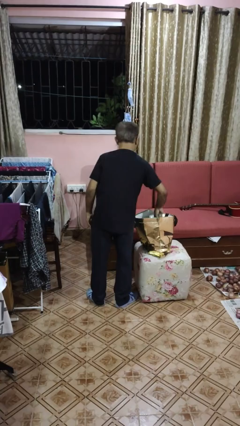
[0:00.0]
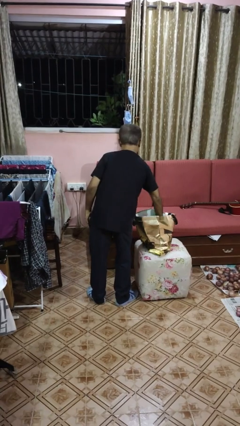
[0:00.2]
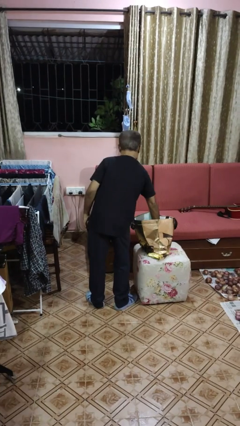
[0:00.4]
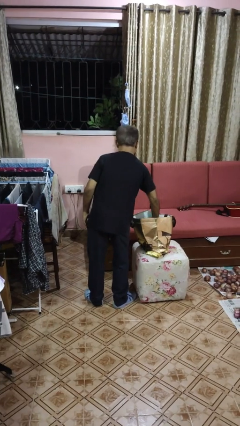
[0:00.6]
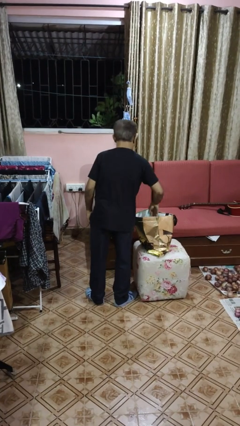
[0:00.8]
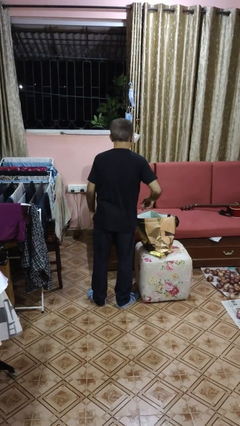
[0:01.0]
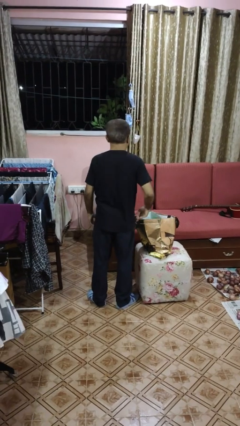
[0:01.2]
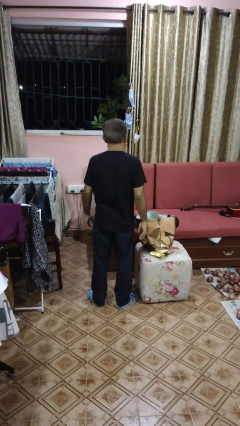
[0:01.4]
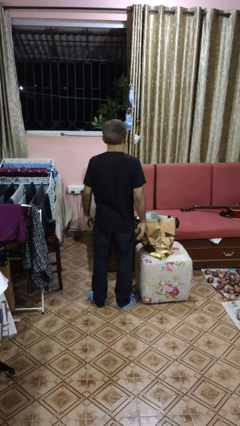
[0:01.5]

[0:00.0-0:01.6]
person puts object into bag

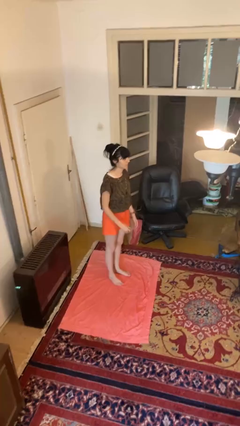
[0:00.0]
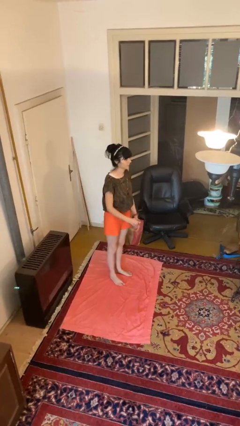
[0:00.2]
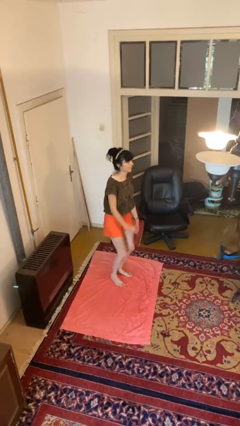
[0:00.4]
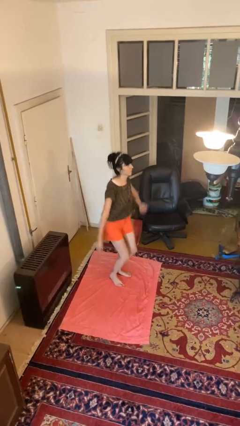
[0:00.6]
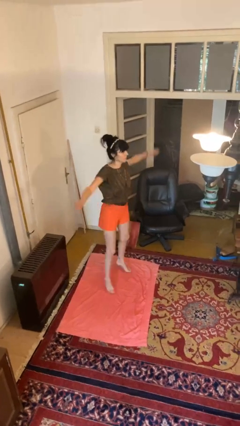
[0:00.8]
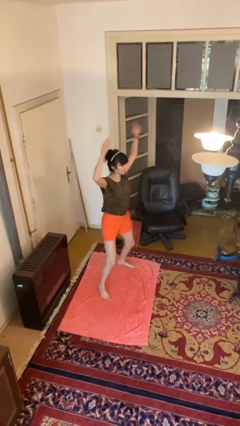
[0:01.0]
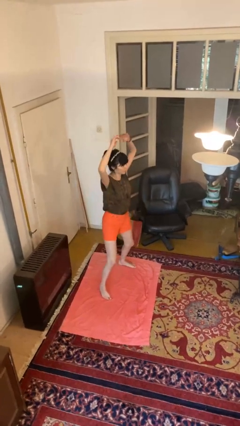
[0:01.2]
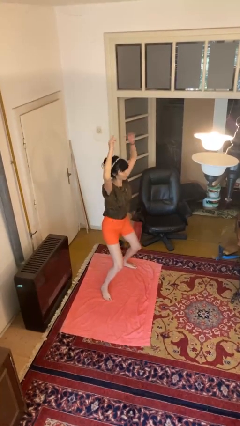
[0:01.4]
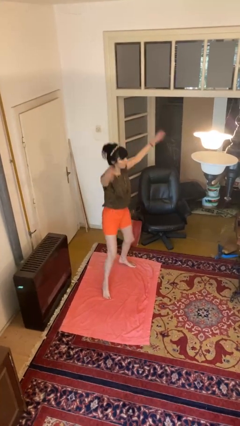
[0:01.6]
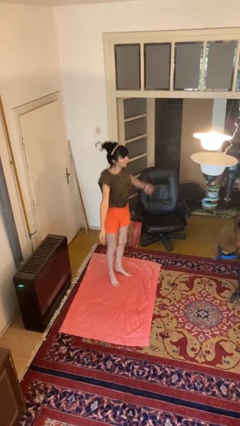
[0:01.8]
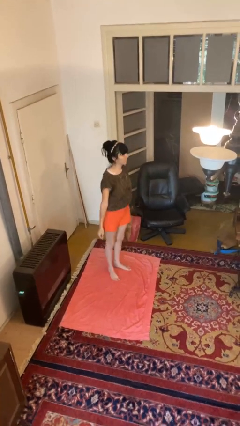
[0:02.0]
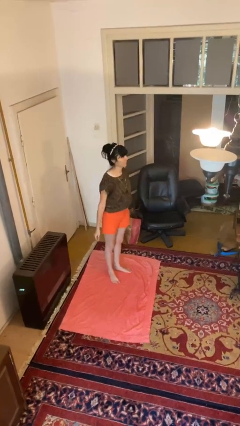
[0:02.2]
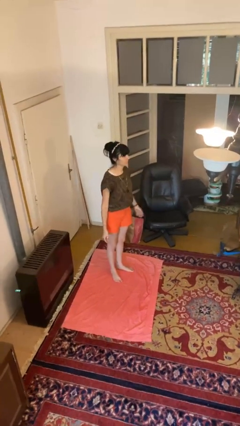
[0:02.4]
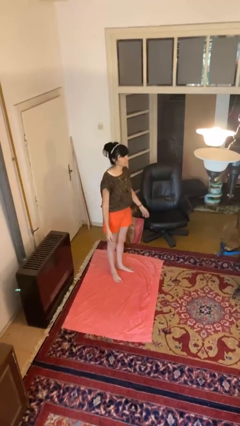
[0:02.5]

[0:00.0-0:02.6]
person exercises with jumping jacks

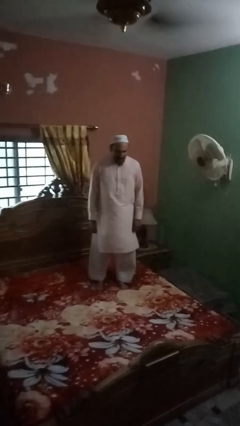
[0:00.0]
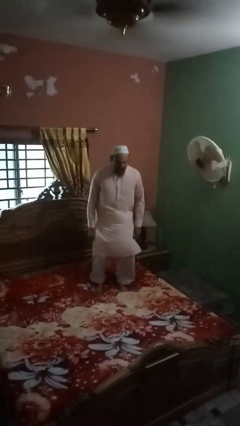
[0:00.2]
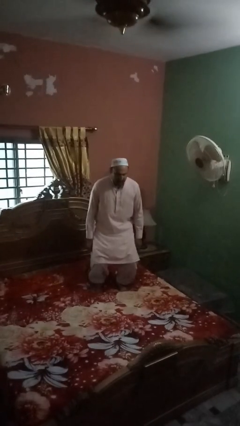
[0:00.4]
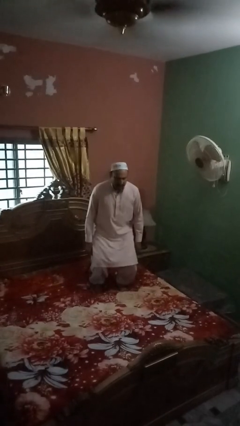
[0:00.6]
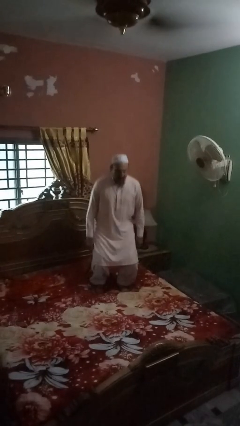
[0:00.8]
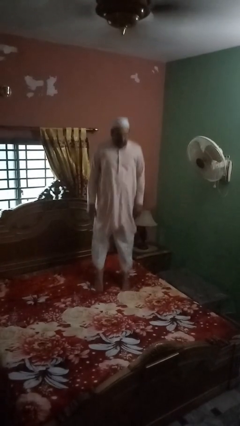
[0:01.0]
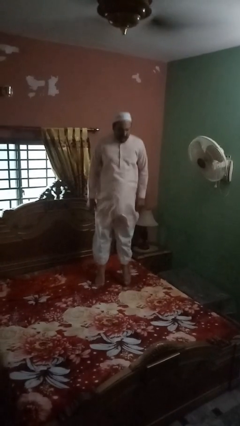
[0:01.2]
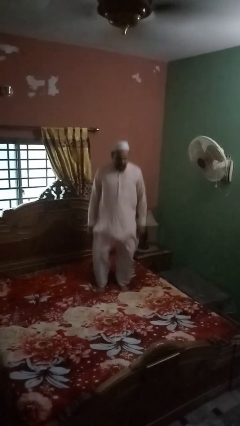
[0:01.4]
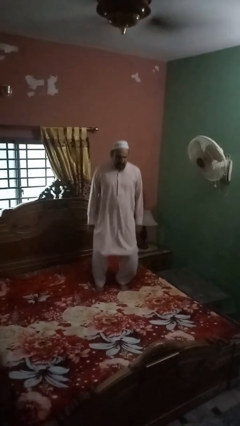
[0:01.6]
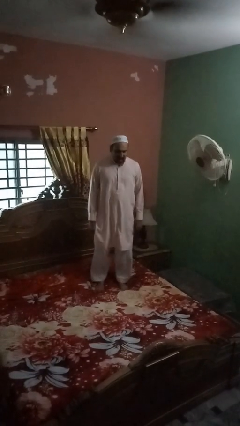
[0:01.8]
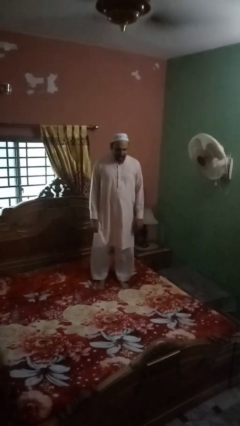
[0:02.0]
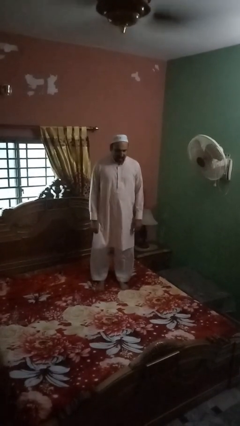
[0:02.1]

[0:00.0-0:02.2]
person jumps on bed

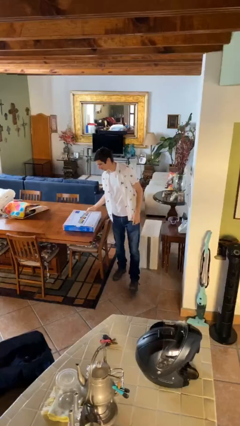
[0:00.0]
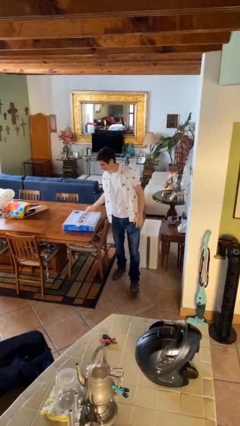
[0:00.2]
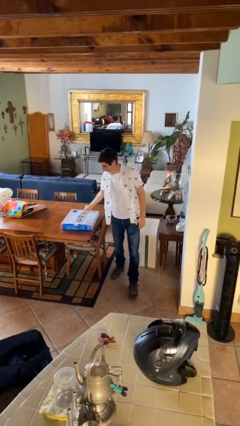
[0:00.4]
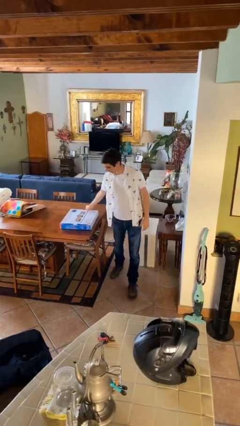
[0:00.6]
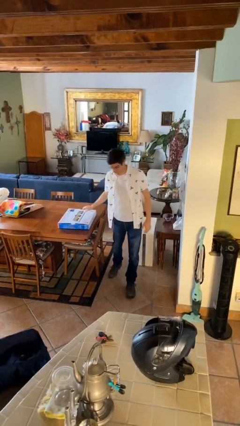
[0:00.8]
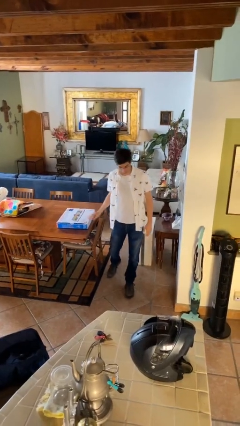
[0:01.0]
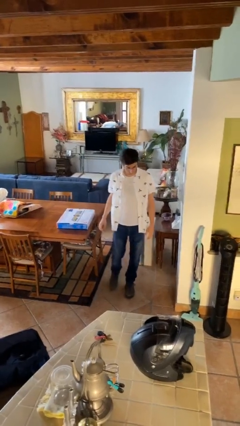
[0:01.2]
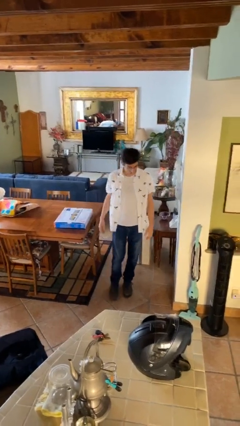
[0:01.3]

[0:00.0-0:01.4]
person puts down object on table

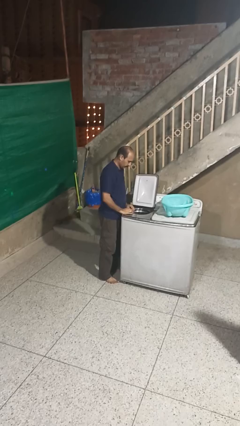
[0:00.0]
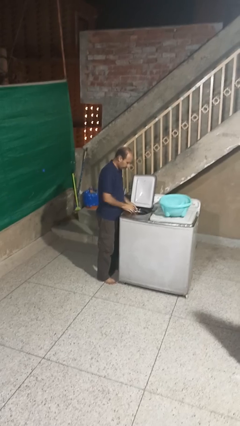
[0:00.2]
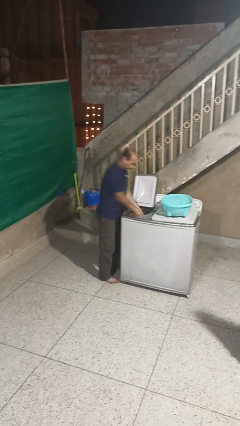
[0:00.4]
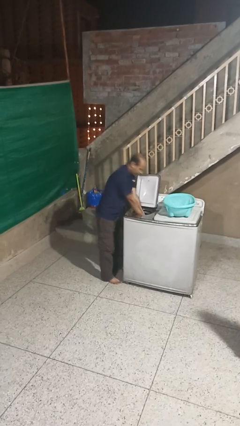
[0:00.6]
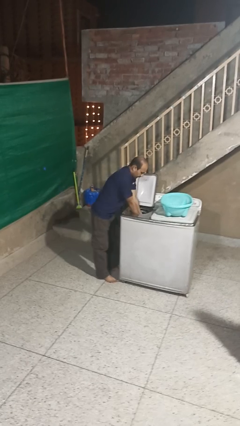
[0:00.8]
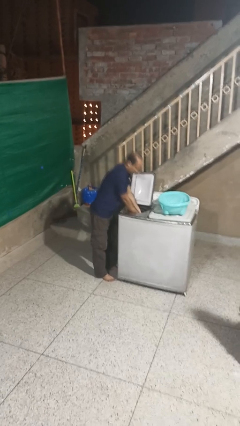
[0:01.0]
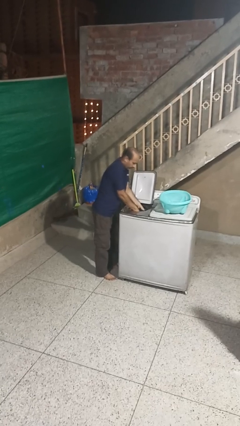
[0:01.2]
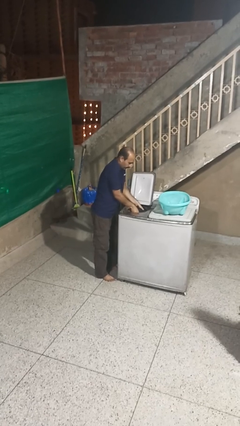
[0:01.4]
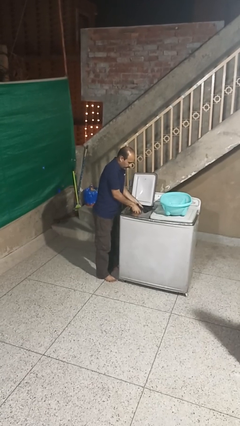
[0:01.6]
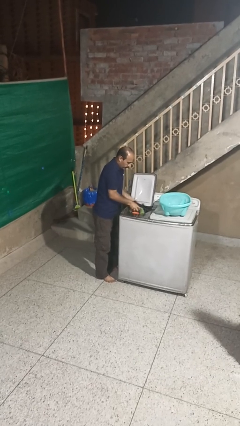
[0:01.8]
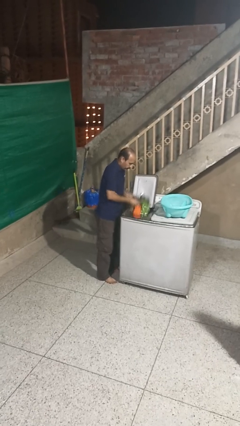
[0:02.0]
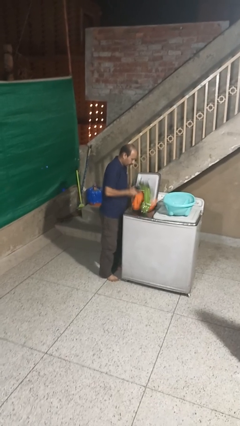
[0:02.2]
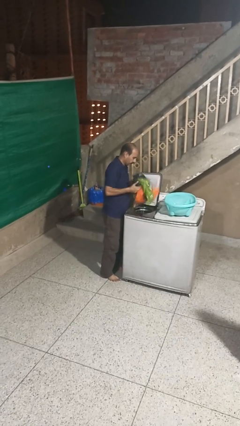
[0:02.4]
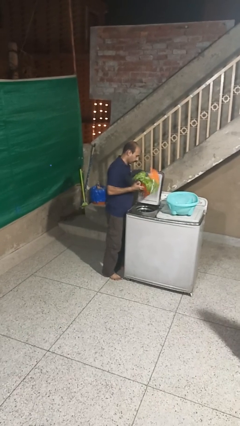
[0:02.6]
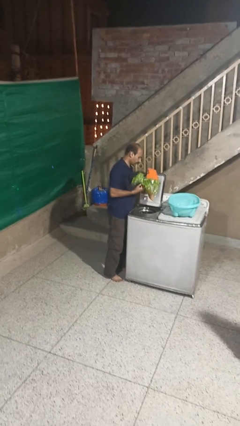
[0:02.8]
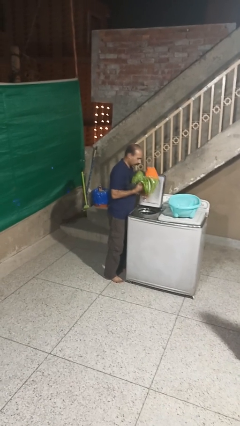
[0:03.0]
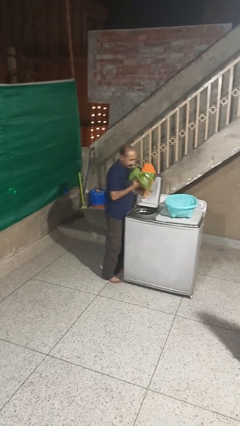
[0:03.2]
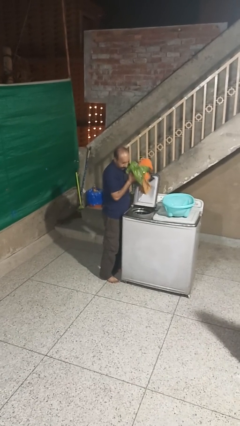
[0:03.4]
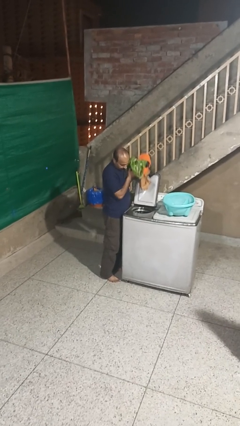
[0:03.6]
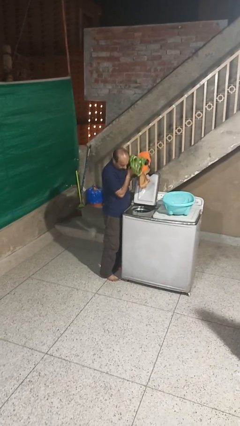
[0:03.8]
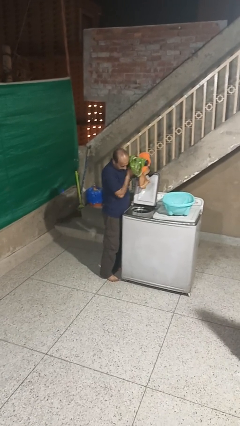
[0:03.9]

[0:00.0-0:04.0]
person unloads dryer

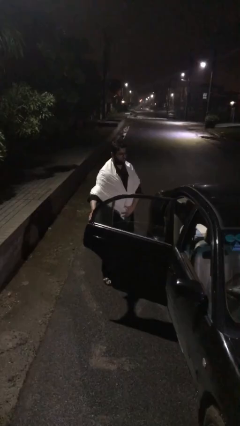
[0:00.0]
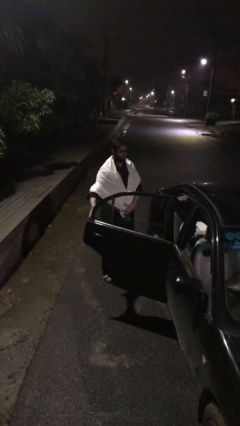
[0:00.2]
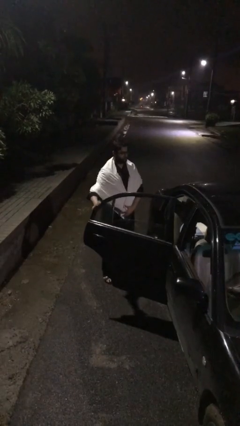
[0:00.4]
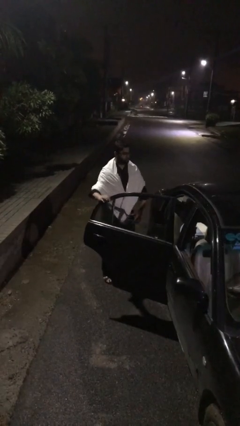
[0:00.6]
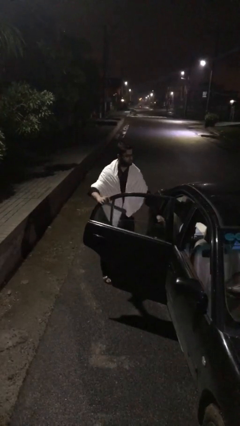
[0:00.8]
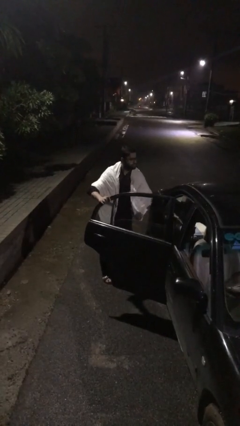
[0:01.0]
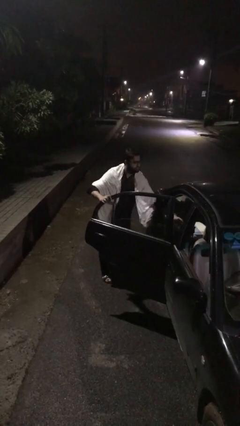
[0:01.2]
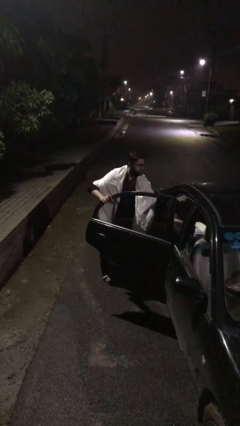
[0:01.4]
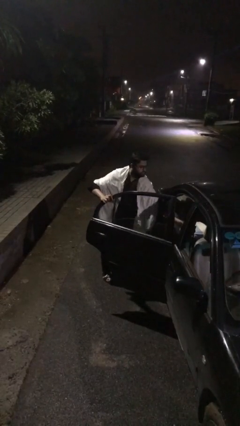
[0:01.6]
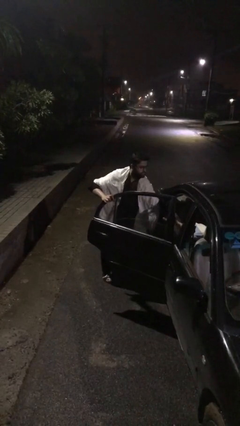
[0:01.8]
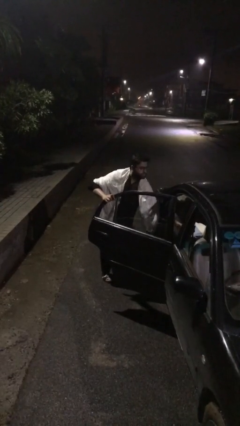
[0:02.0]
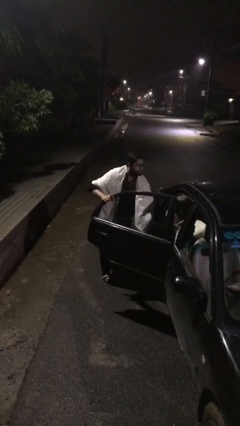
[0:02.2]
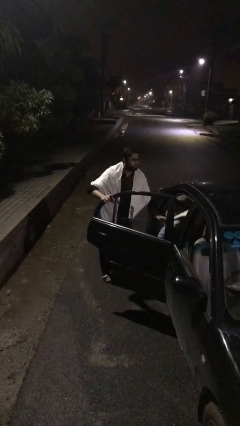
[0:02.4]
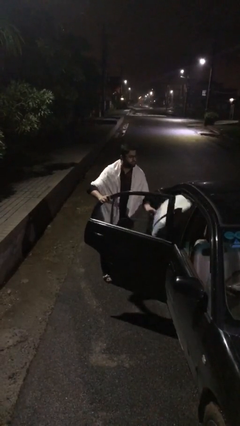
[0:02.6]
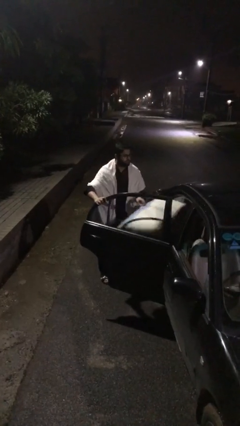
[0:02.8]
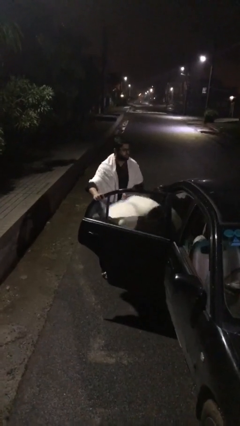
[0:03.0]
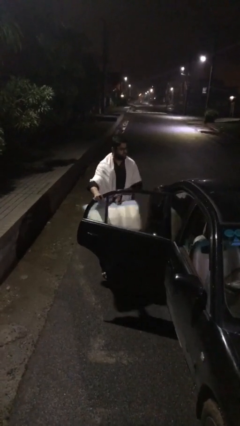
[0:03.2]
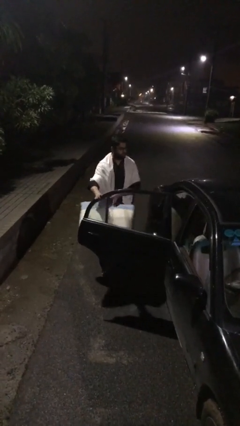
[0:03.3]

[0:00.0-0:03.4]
person unloads car

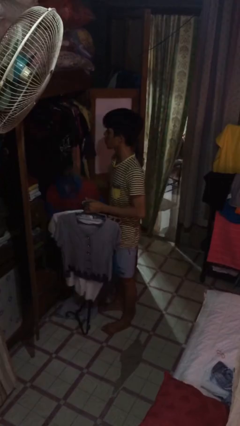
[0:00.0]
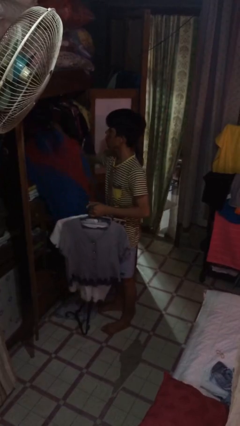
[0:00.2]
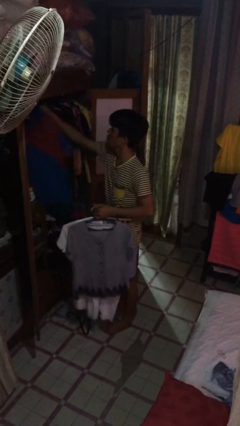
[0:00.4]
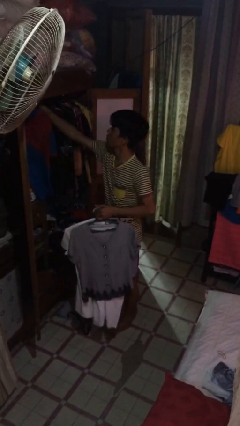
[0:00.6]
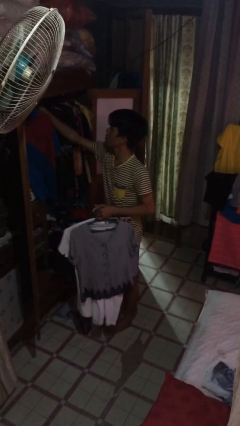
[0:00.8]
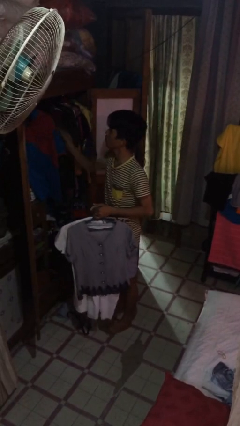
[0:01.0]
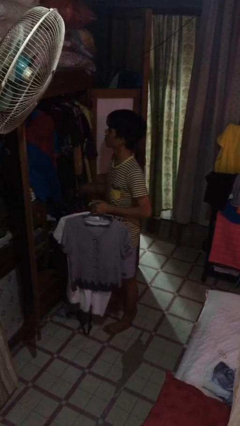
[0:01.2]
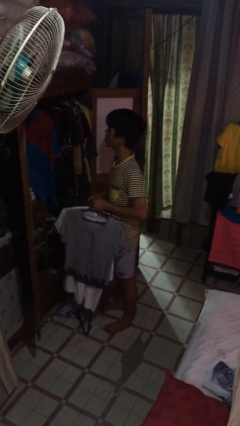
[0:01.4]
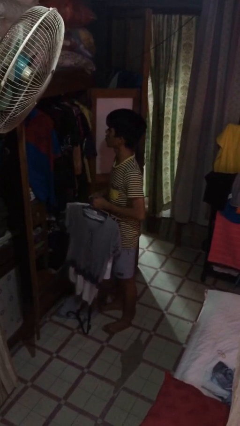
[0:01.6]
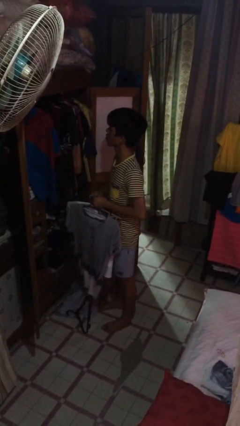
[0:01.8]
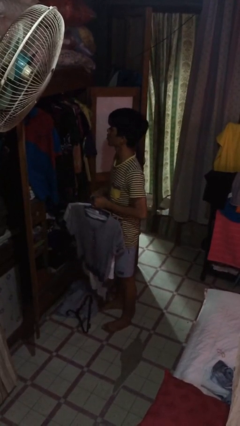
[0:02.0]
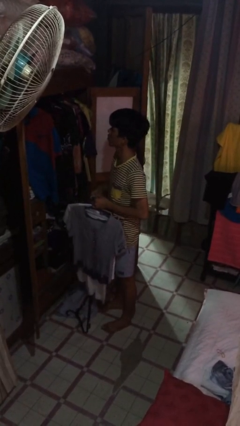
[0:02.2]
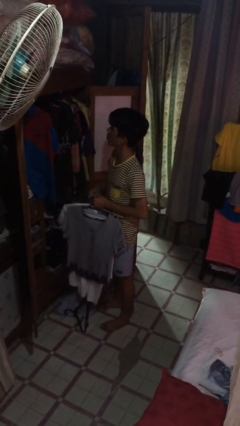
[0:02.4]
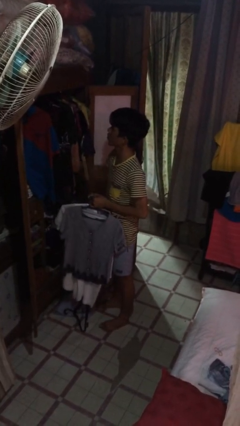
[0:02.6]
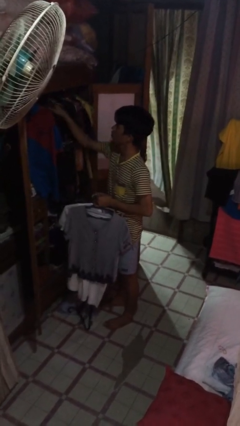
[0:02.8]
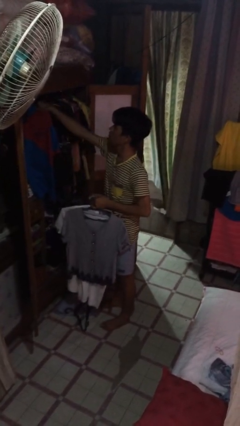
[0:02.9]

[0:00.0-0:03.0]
person puts clothes into closet
